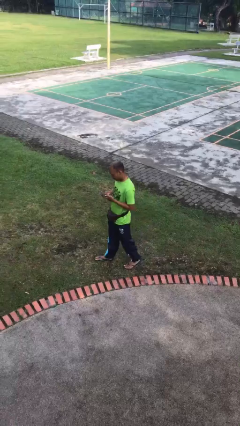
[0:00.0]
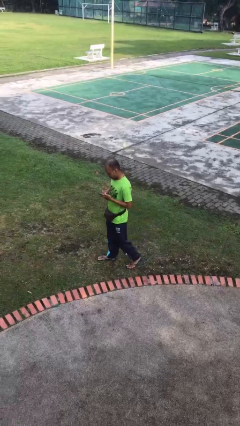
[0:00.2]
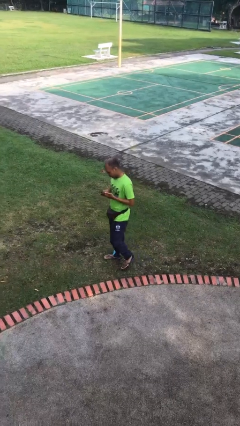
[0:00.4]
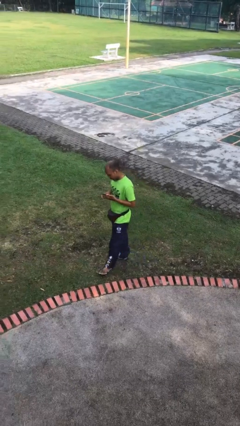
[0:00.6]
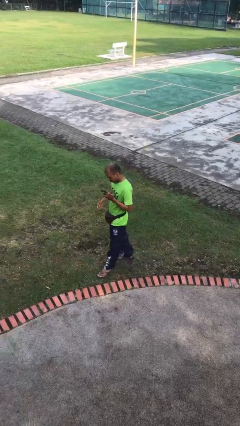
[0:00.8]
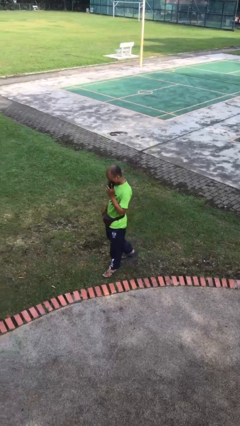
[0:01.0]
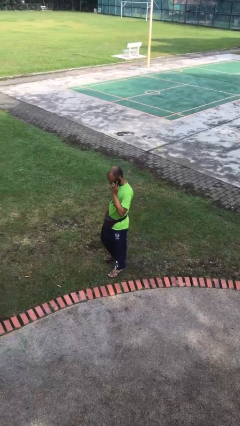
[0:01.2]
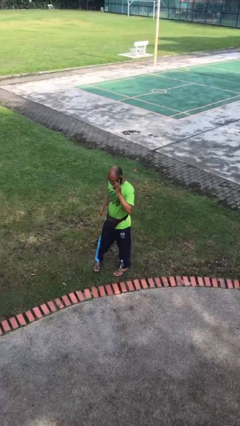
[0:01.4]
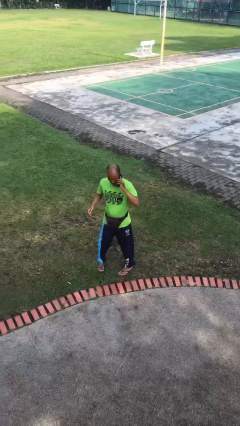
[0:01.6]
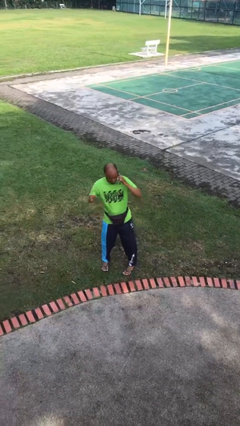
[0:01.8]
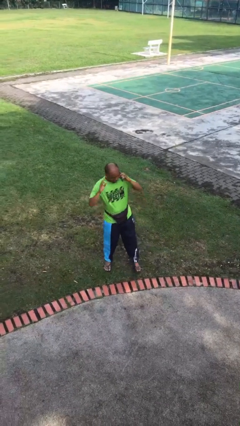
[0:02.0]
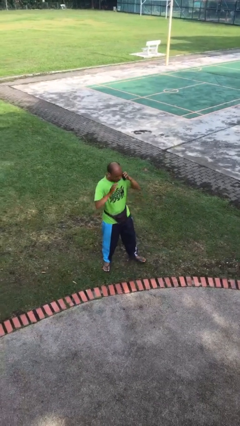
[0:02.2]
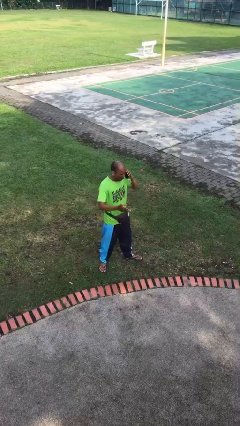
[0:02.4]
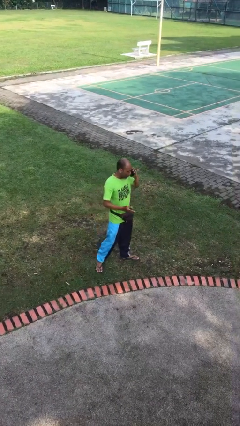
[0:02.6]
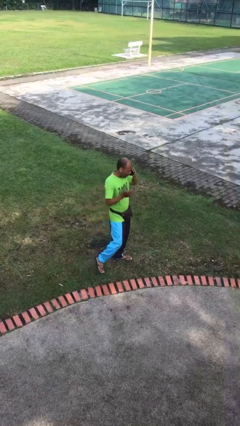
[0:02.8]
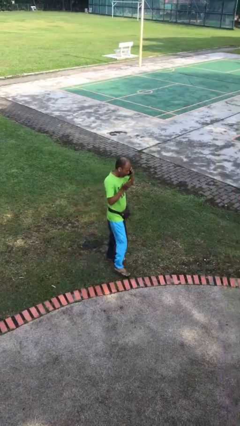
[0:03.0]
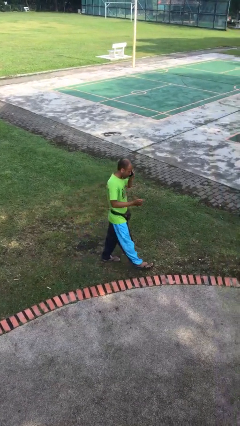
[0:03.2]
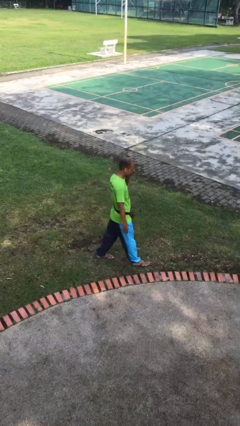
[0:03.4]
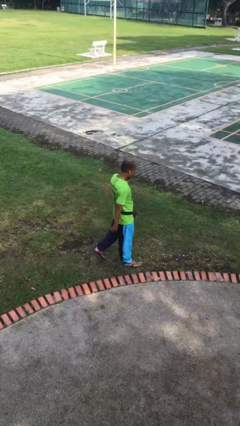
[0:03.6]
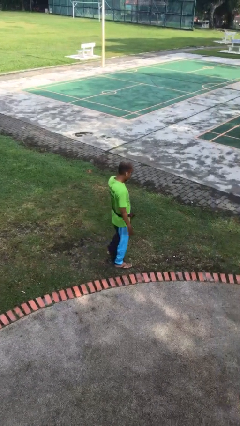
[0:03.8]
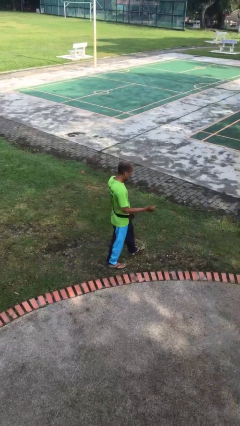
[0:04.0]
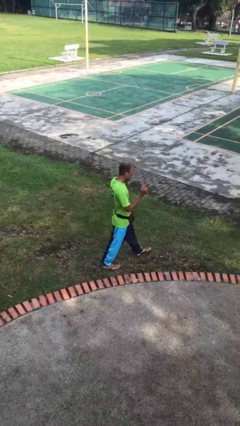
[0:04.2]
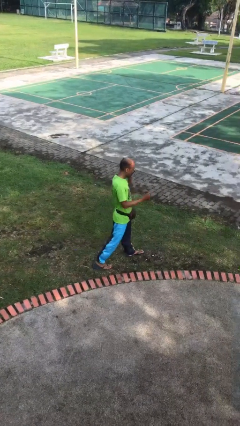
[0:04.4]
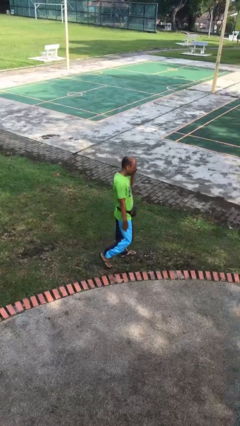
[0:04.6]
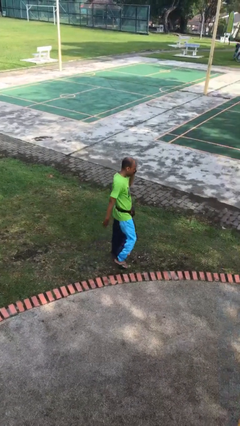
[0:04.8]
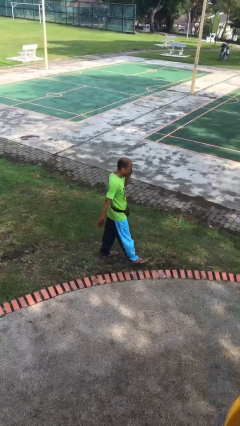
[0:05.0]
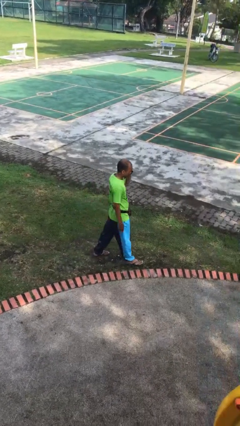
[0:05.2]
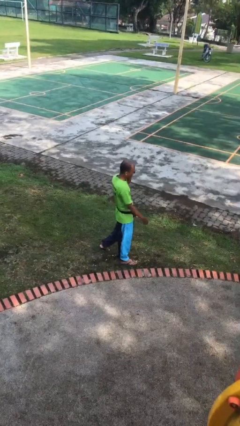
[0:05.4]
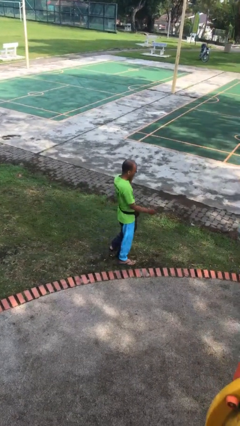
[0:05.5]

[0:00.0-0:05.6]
person talks on phone

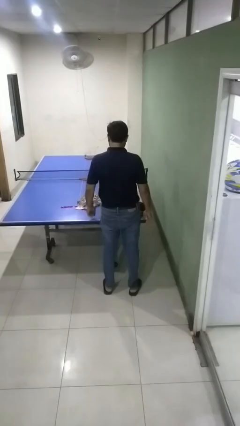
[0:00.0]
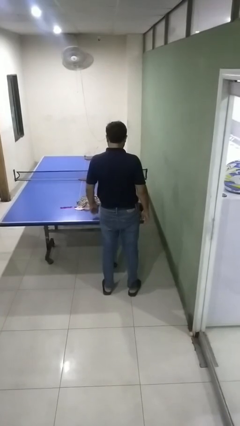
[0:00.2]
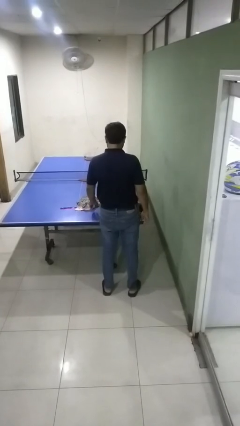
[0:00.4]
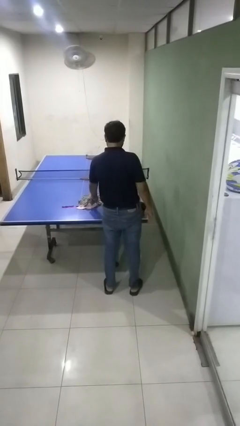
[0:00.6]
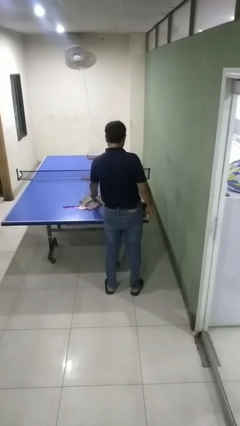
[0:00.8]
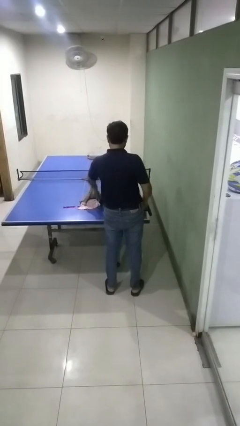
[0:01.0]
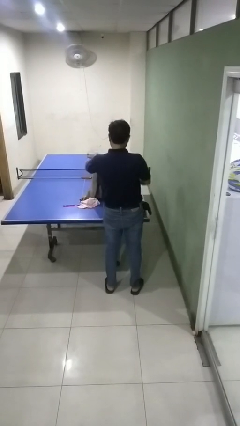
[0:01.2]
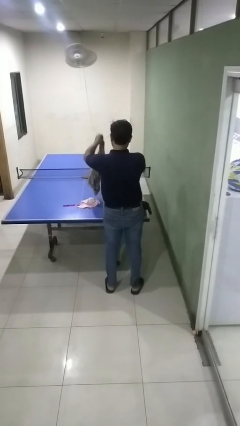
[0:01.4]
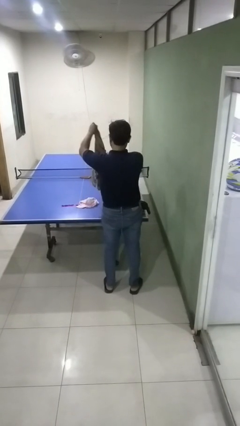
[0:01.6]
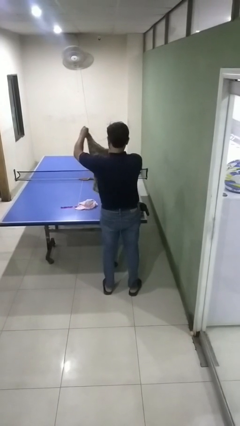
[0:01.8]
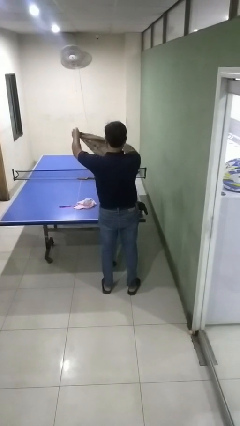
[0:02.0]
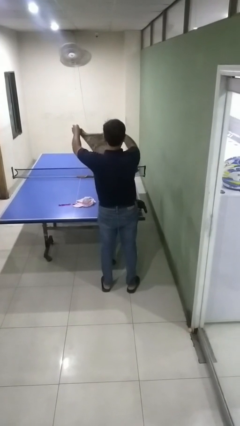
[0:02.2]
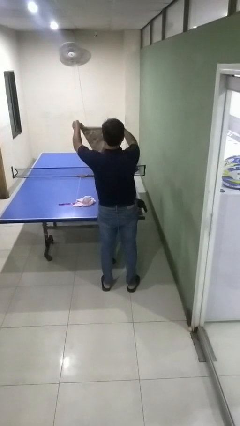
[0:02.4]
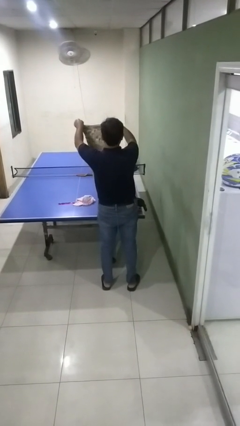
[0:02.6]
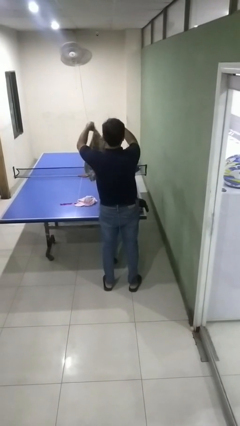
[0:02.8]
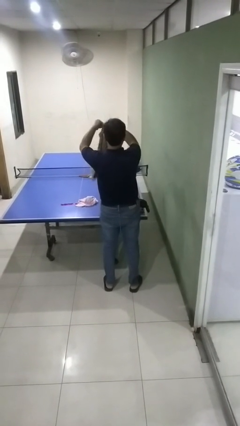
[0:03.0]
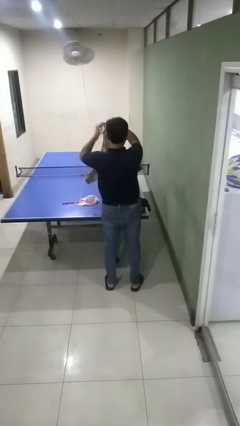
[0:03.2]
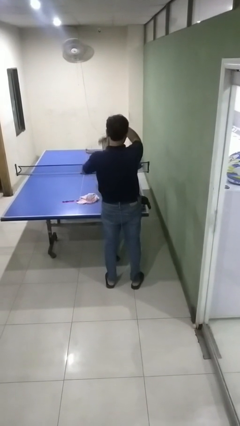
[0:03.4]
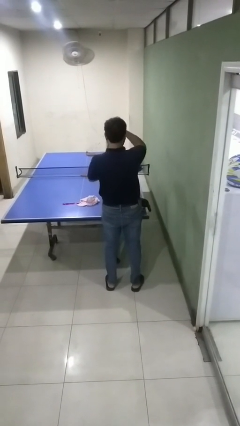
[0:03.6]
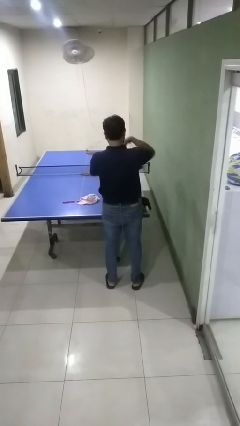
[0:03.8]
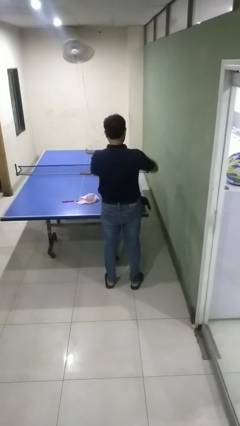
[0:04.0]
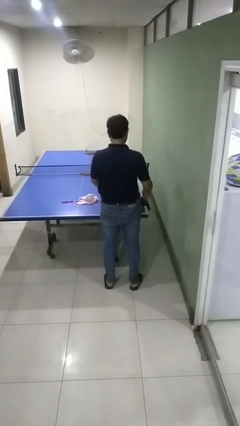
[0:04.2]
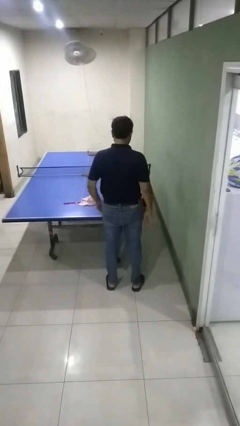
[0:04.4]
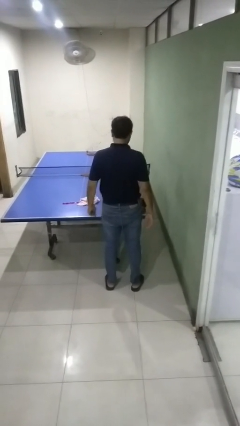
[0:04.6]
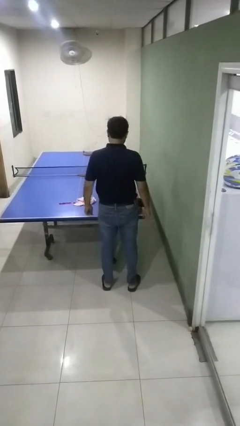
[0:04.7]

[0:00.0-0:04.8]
person folds shirt

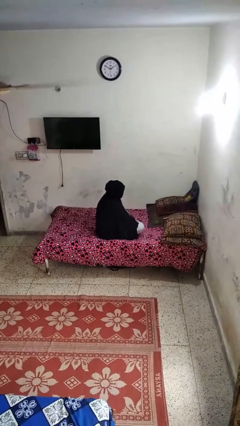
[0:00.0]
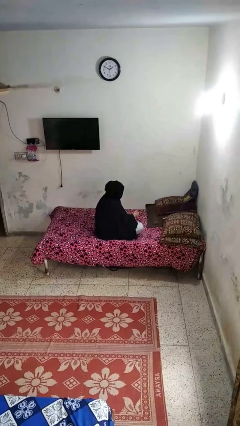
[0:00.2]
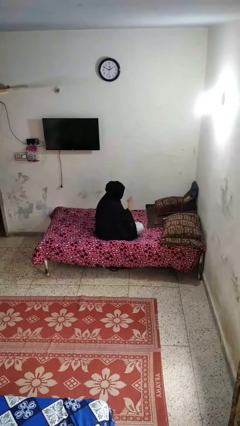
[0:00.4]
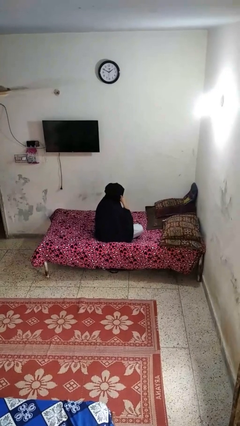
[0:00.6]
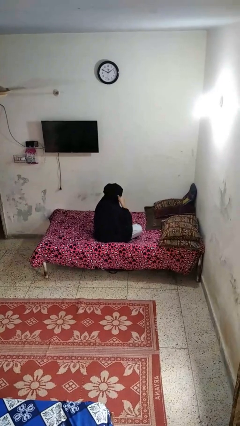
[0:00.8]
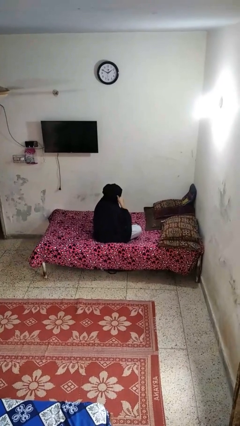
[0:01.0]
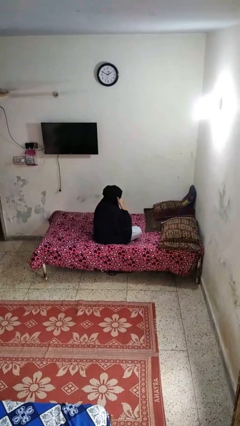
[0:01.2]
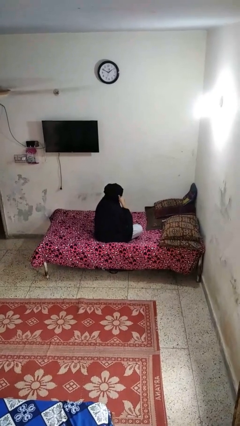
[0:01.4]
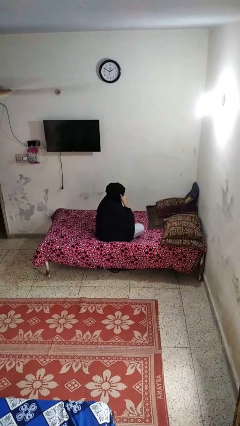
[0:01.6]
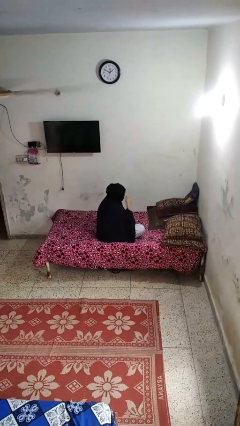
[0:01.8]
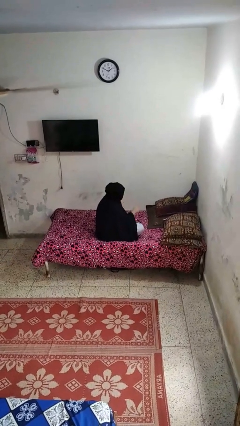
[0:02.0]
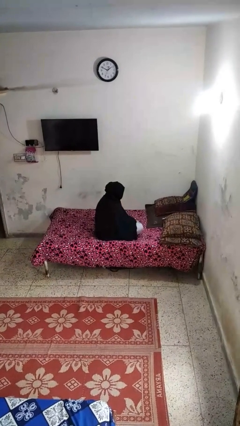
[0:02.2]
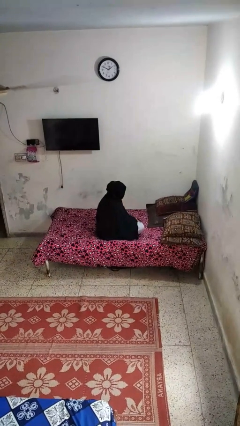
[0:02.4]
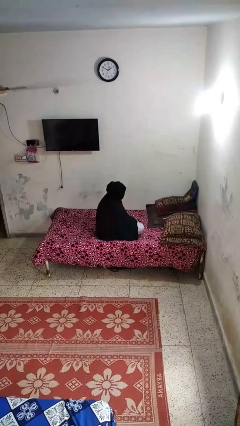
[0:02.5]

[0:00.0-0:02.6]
person gestures call me

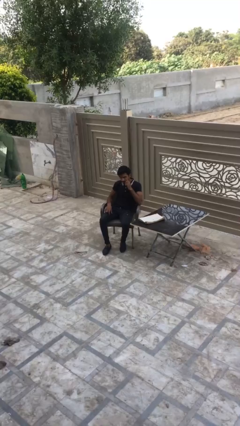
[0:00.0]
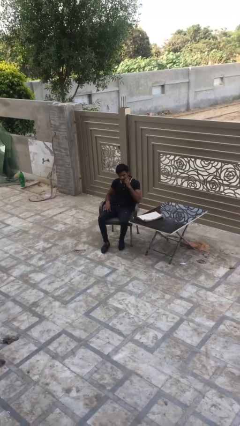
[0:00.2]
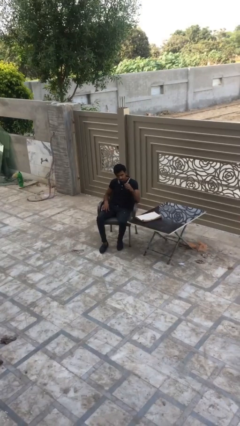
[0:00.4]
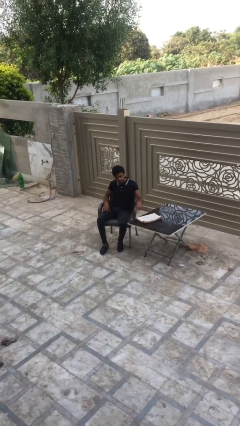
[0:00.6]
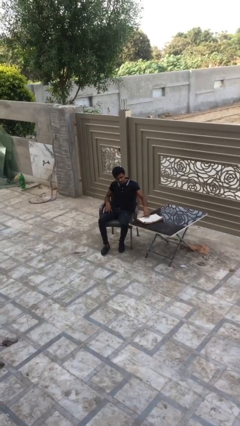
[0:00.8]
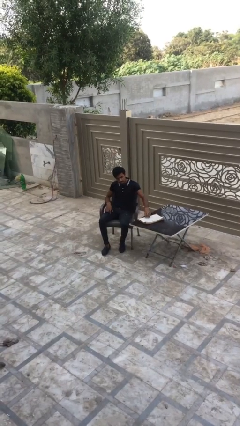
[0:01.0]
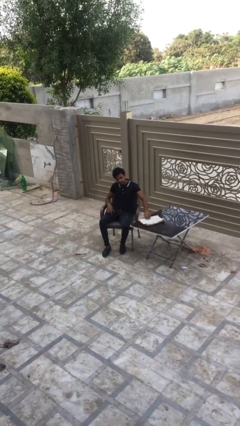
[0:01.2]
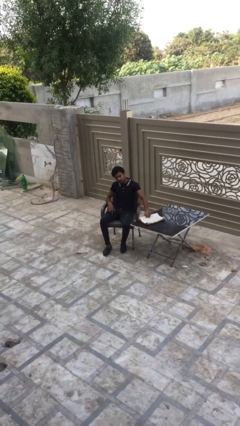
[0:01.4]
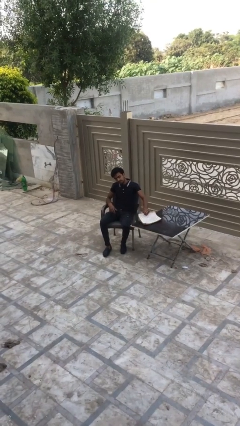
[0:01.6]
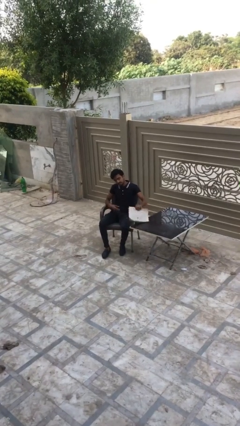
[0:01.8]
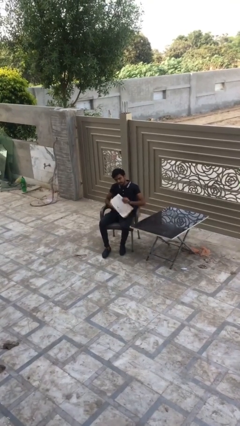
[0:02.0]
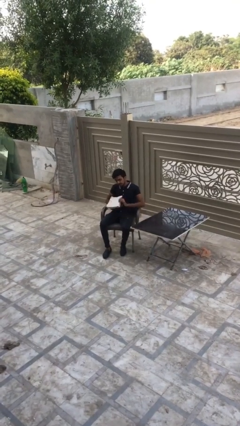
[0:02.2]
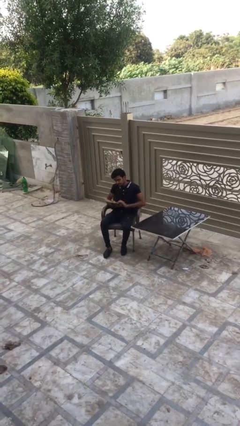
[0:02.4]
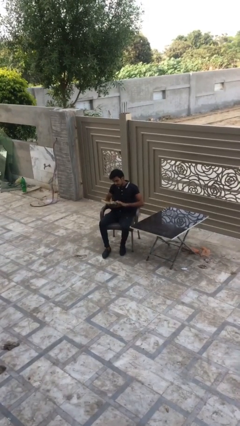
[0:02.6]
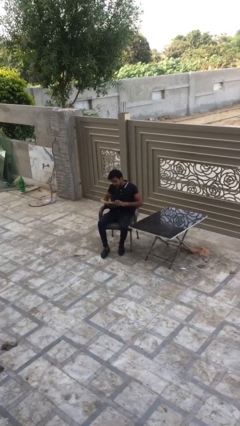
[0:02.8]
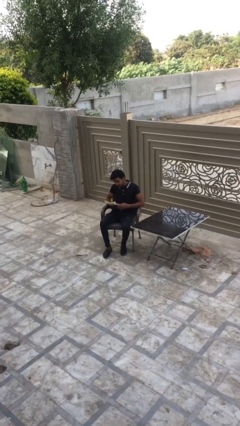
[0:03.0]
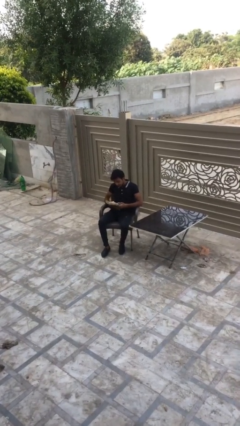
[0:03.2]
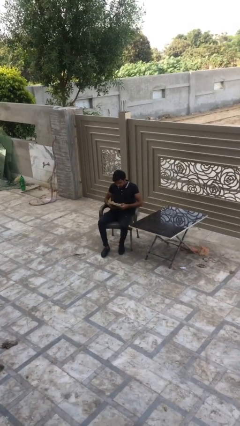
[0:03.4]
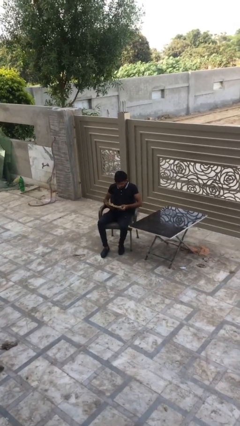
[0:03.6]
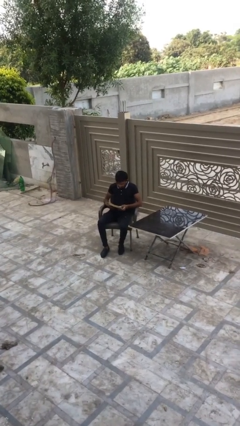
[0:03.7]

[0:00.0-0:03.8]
person picks up object from table

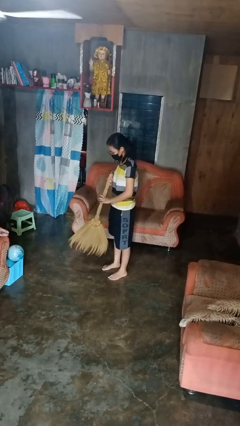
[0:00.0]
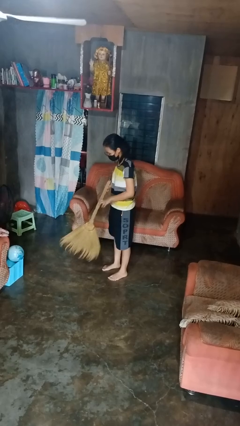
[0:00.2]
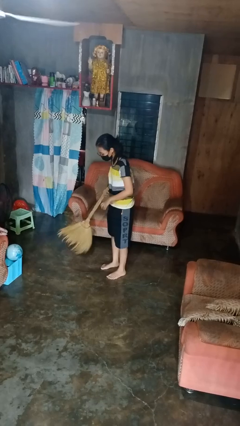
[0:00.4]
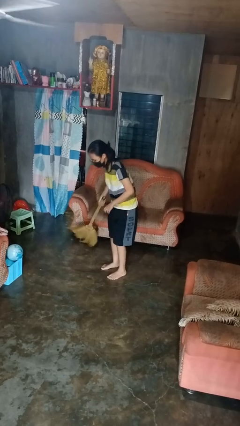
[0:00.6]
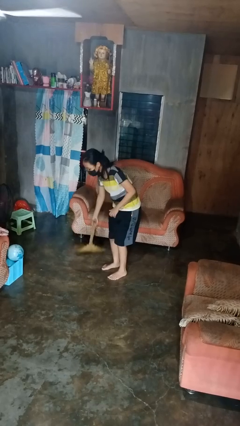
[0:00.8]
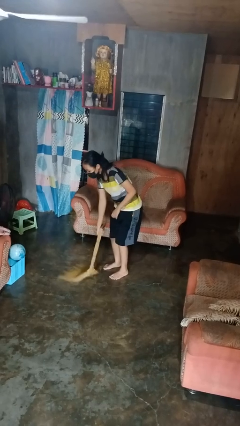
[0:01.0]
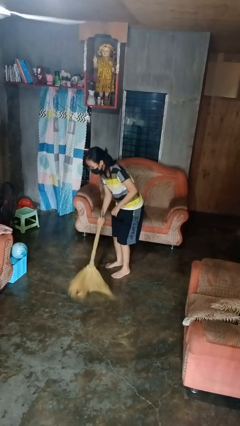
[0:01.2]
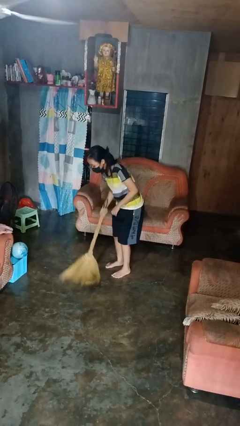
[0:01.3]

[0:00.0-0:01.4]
person sweeps floor
